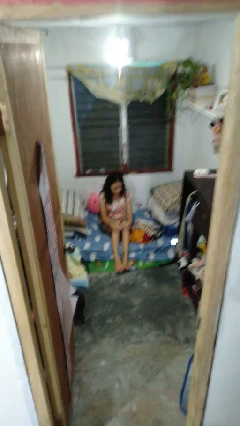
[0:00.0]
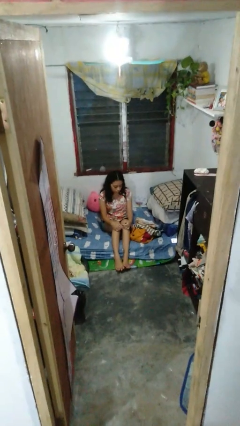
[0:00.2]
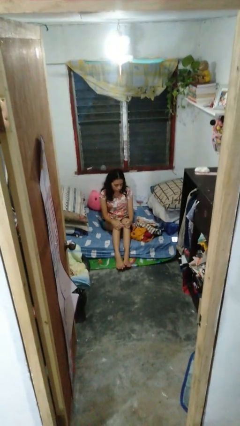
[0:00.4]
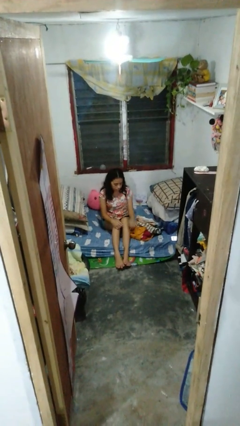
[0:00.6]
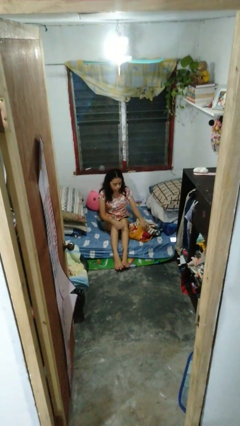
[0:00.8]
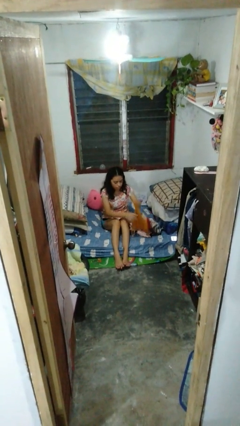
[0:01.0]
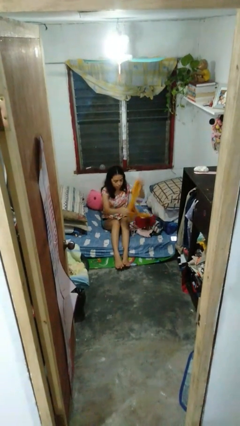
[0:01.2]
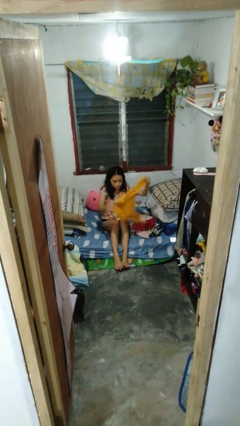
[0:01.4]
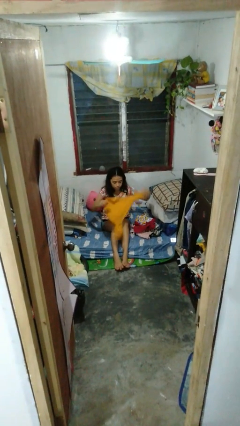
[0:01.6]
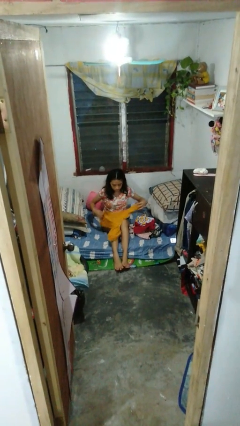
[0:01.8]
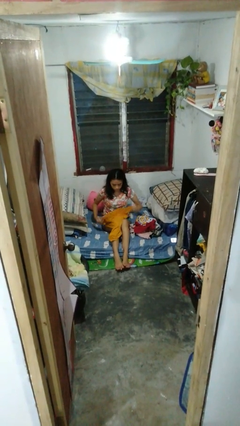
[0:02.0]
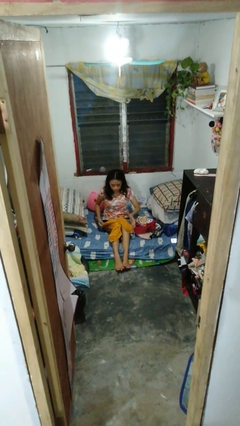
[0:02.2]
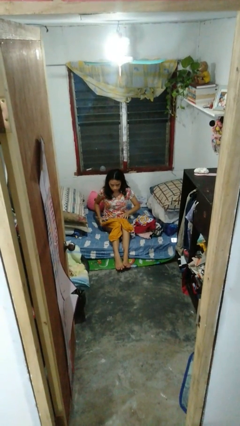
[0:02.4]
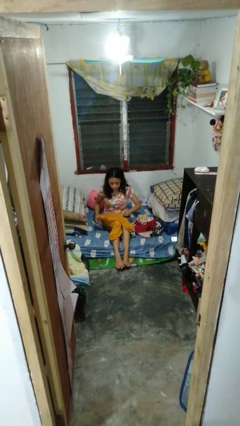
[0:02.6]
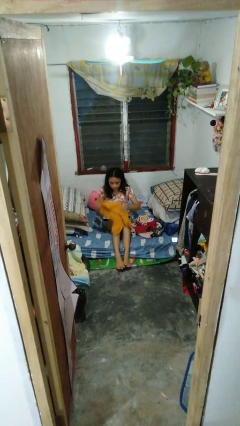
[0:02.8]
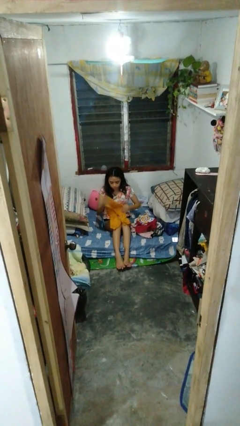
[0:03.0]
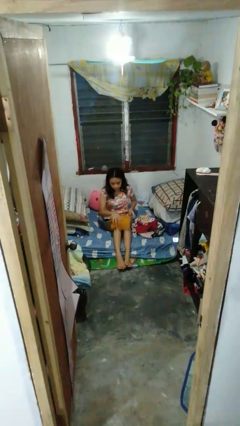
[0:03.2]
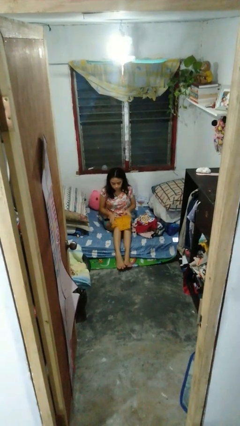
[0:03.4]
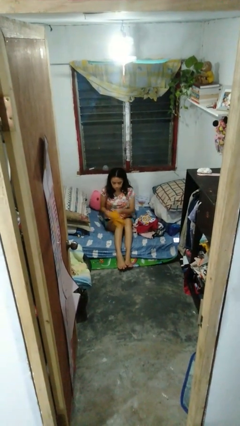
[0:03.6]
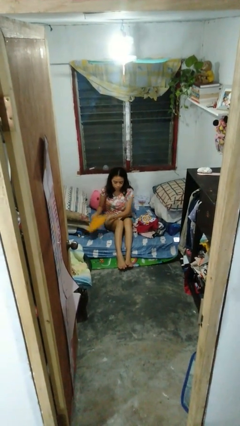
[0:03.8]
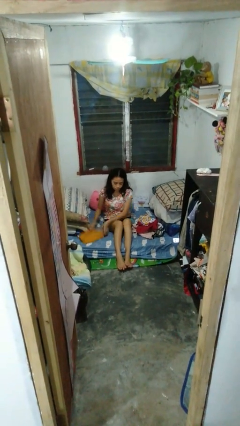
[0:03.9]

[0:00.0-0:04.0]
person folds shirt

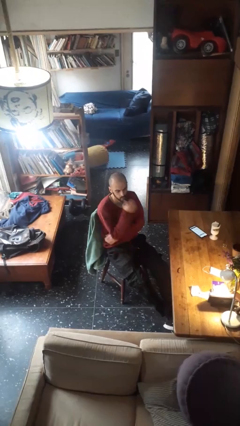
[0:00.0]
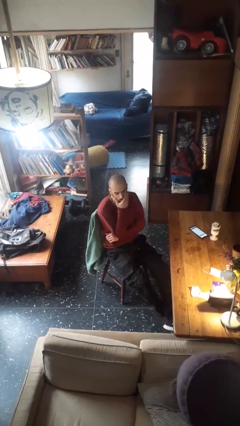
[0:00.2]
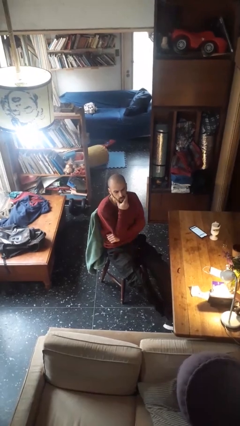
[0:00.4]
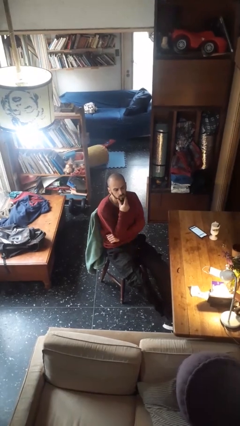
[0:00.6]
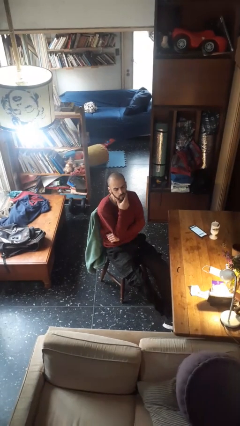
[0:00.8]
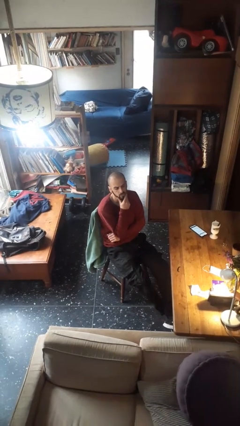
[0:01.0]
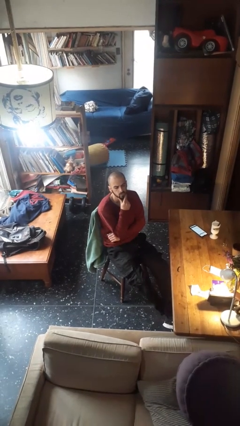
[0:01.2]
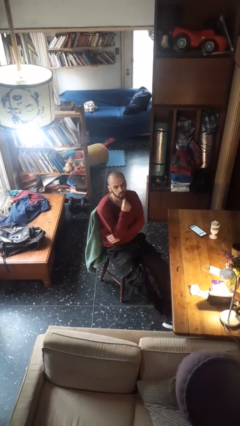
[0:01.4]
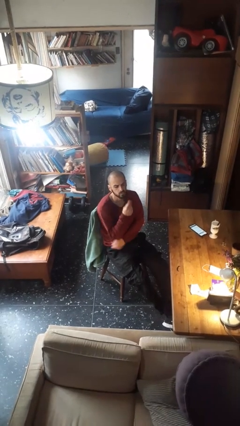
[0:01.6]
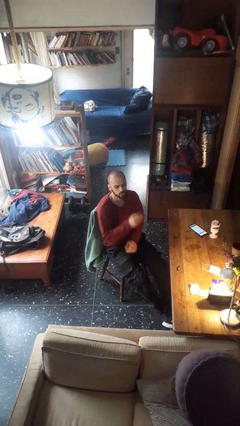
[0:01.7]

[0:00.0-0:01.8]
person strokes chin

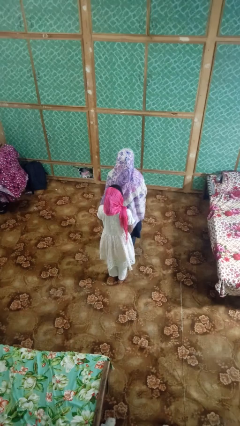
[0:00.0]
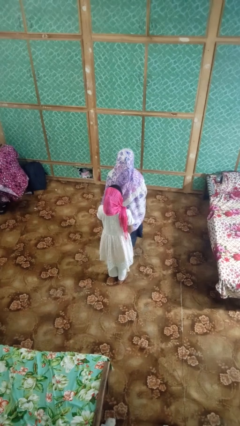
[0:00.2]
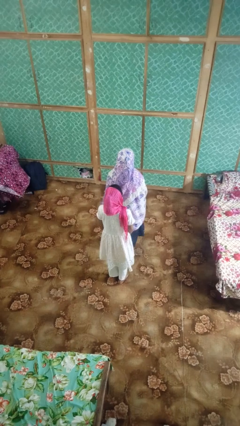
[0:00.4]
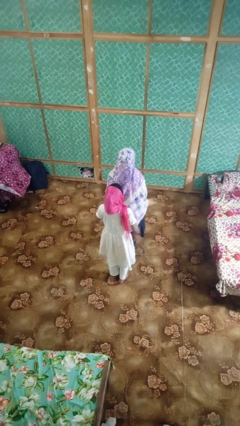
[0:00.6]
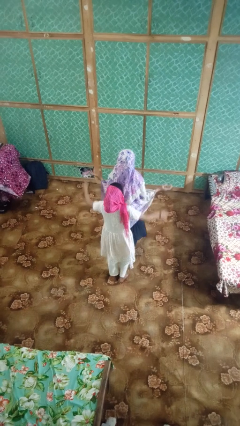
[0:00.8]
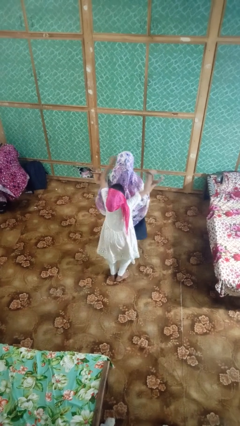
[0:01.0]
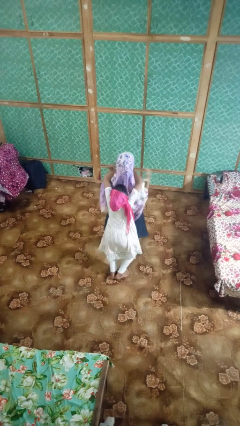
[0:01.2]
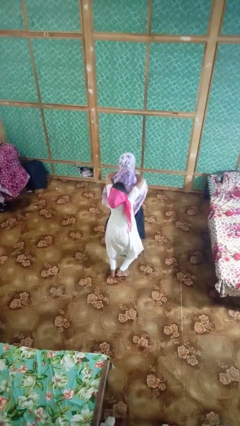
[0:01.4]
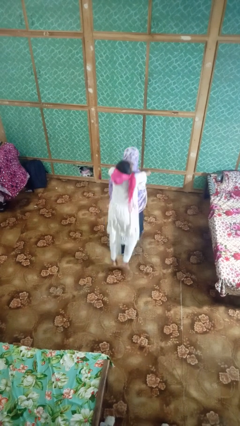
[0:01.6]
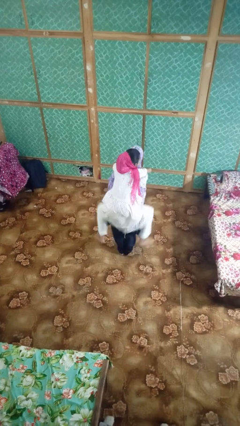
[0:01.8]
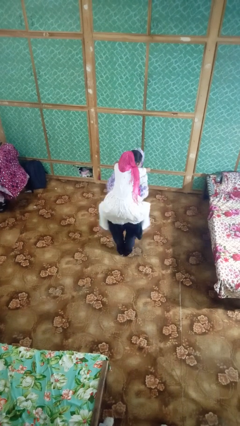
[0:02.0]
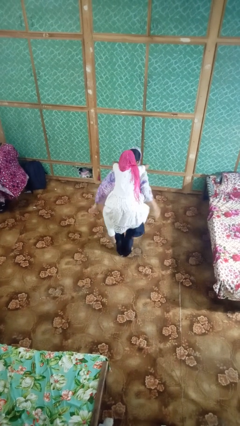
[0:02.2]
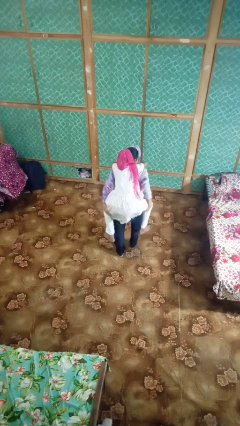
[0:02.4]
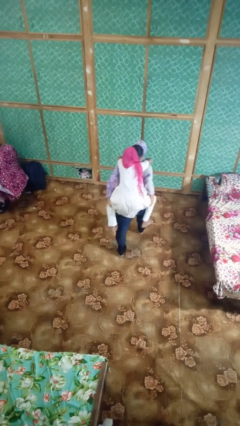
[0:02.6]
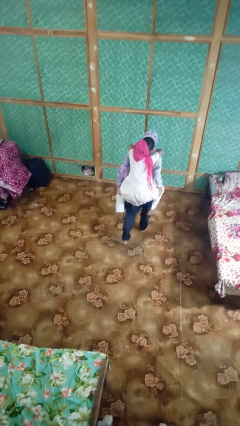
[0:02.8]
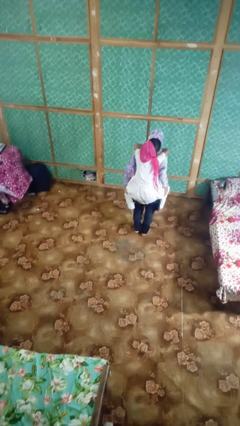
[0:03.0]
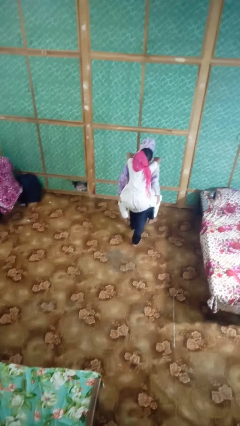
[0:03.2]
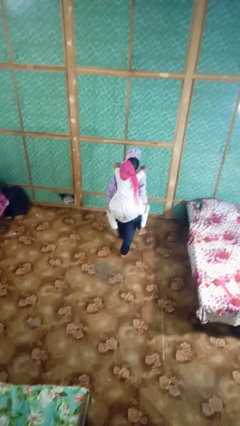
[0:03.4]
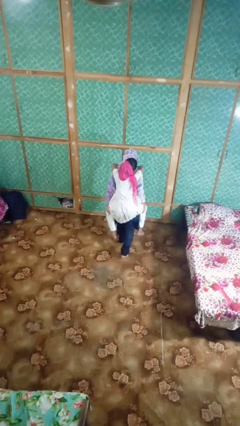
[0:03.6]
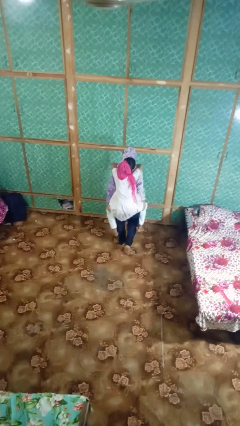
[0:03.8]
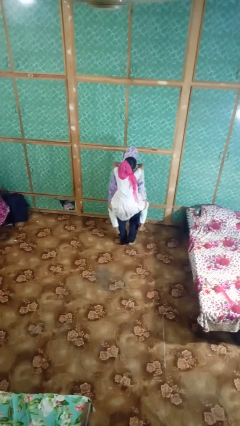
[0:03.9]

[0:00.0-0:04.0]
person carries person on back

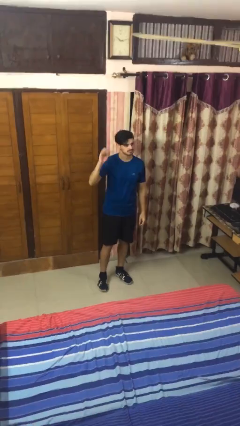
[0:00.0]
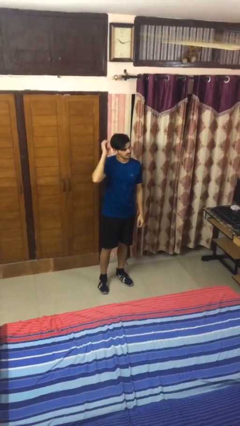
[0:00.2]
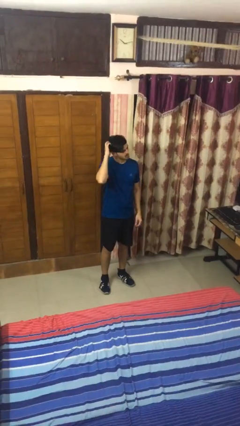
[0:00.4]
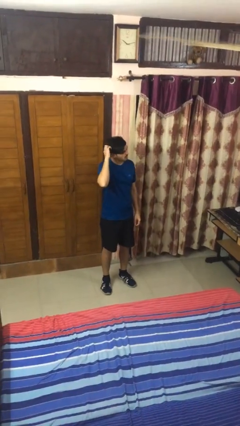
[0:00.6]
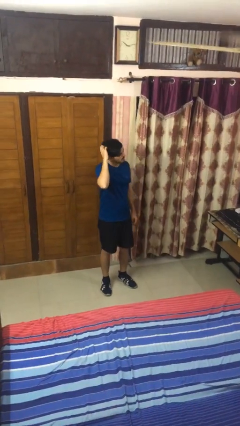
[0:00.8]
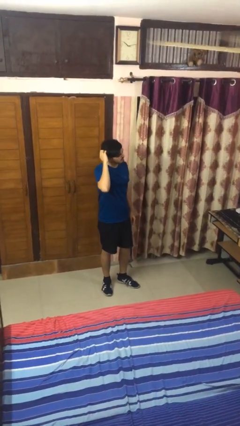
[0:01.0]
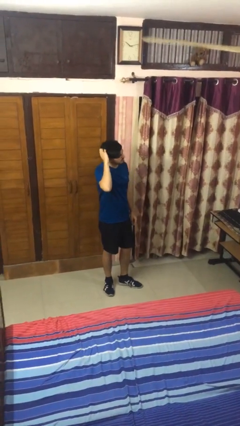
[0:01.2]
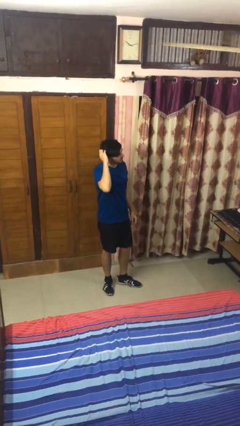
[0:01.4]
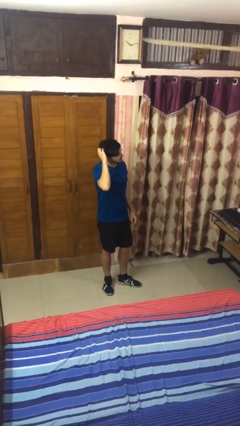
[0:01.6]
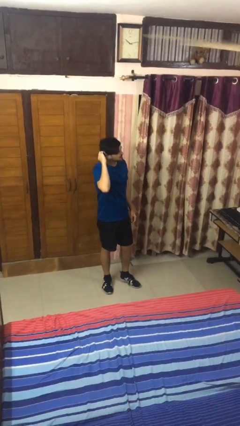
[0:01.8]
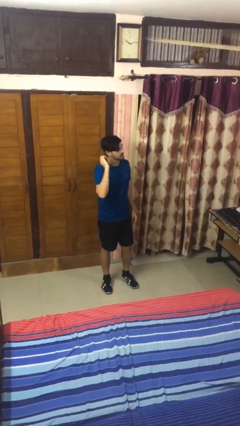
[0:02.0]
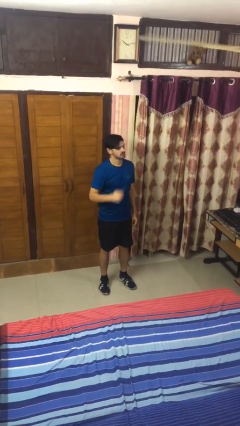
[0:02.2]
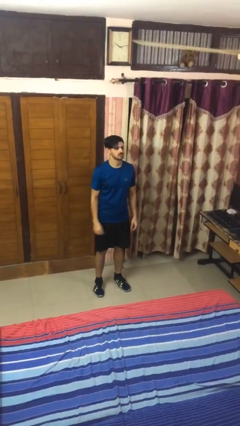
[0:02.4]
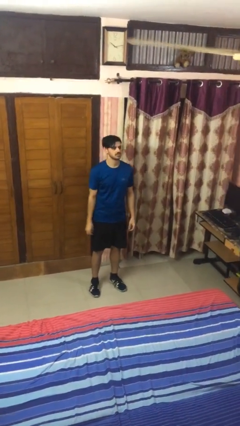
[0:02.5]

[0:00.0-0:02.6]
person scratches face

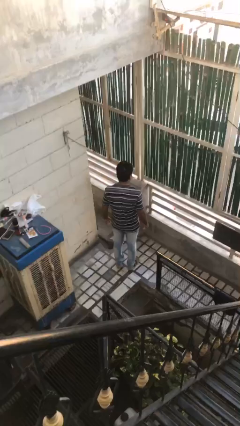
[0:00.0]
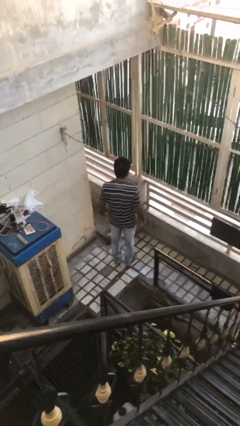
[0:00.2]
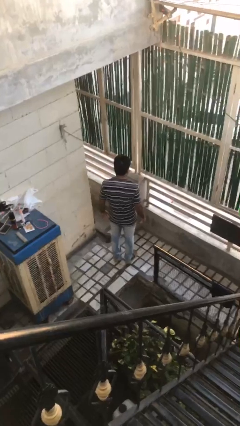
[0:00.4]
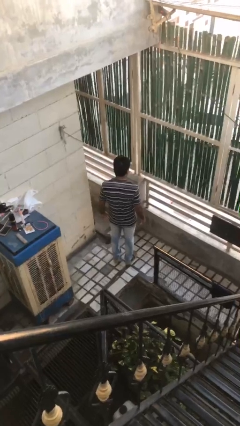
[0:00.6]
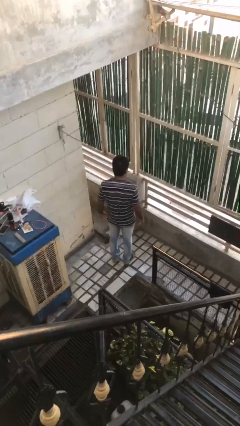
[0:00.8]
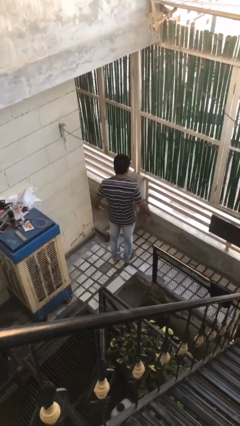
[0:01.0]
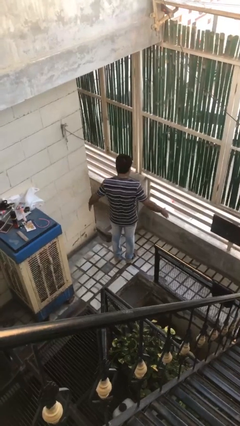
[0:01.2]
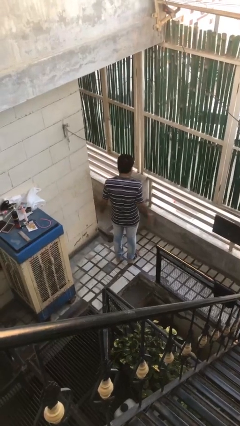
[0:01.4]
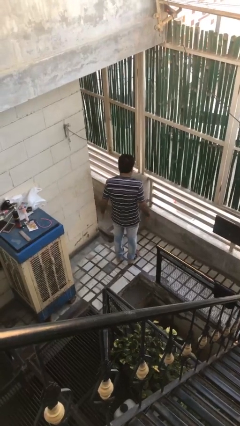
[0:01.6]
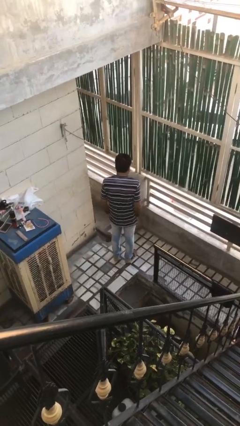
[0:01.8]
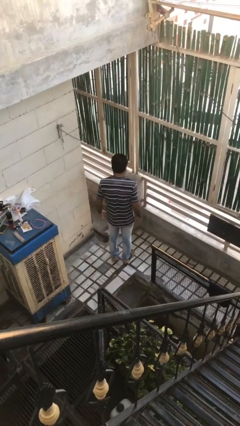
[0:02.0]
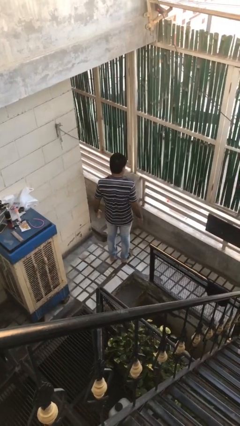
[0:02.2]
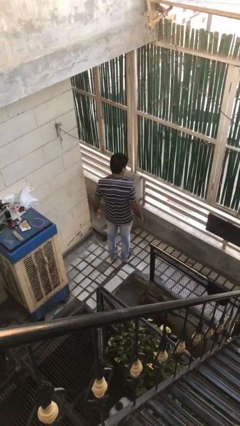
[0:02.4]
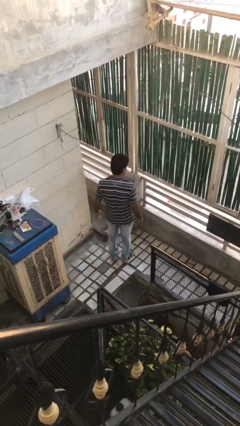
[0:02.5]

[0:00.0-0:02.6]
person slaps hands on thighs

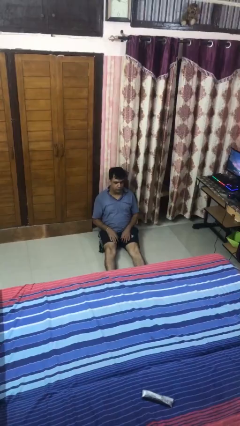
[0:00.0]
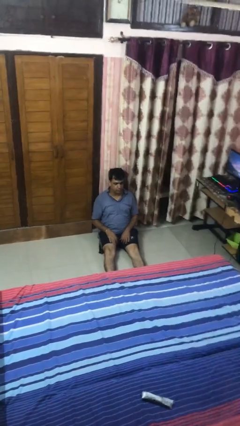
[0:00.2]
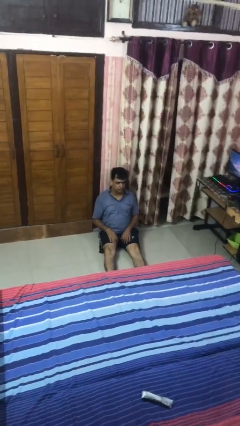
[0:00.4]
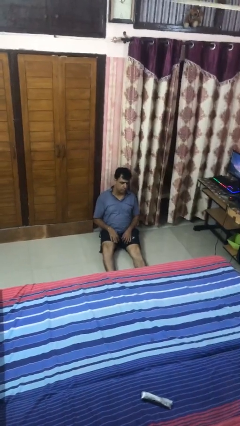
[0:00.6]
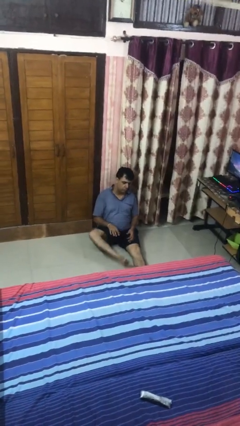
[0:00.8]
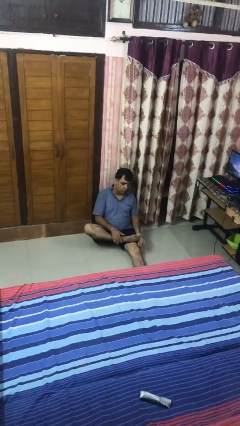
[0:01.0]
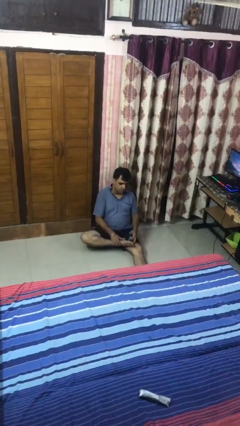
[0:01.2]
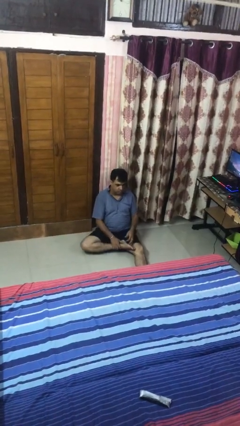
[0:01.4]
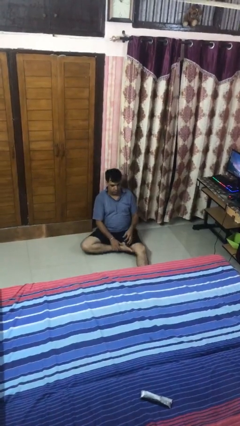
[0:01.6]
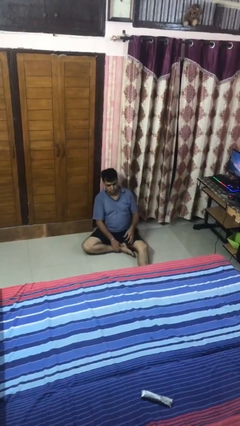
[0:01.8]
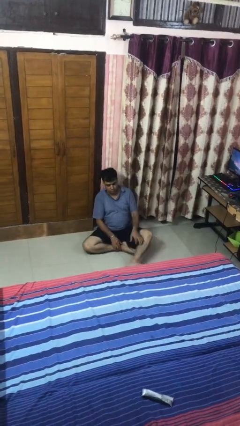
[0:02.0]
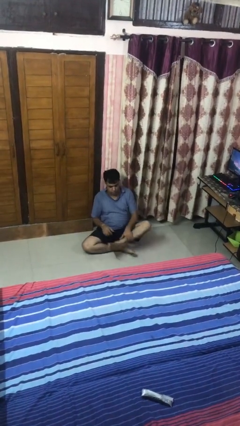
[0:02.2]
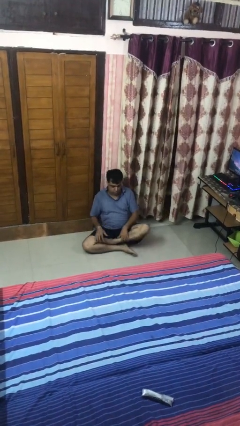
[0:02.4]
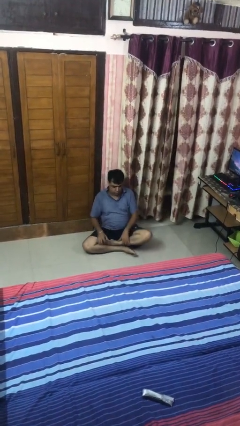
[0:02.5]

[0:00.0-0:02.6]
person crosses legs
